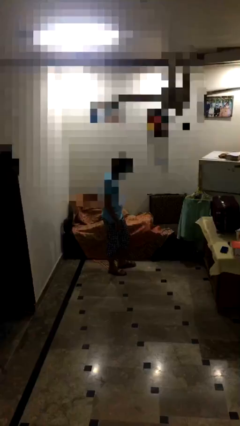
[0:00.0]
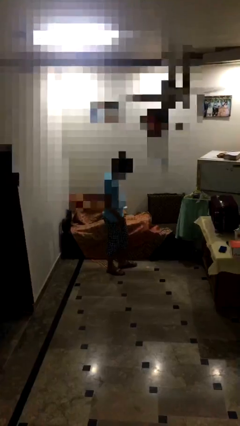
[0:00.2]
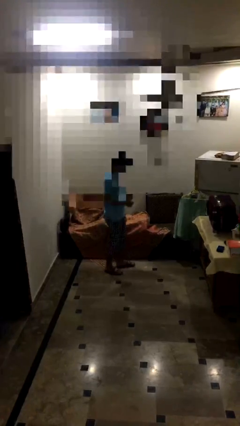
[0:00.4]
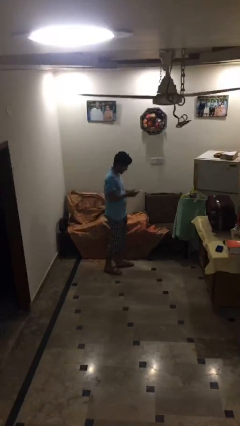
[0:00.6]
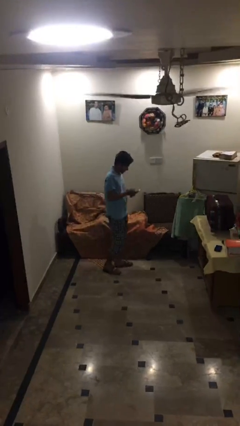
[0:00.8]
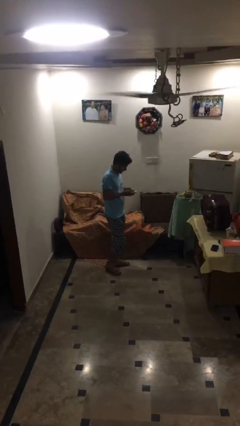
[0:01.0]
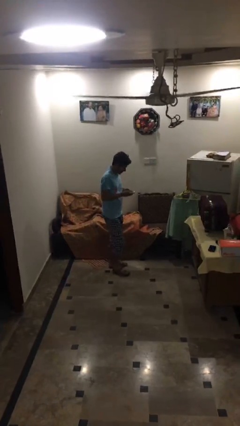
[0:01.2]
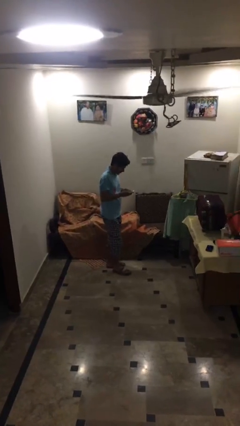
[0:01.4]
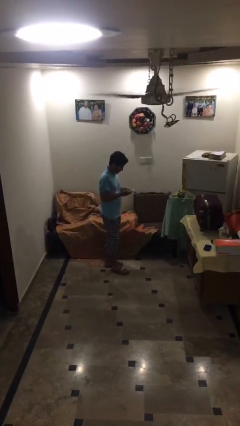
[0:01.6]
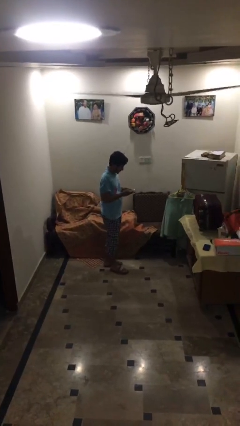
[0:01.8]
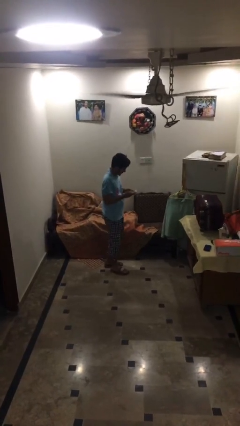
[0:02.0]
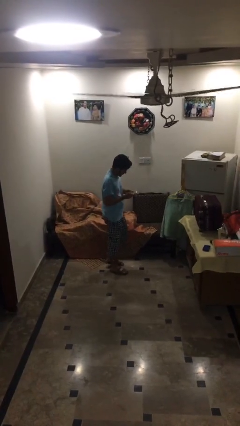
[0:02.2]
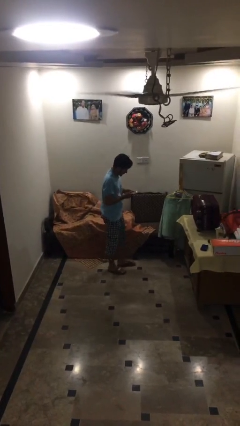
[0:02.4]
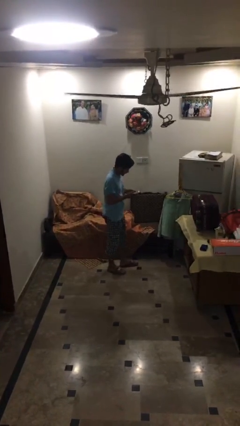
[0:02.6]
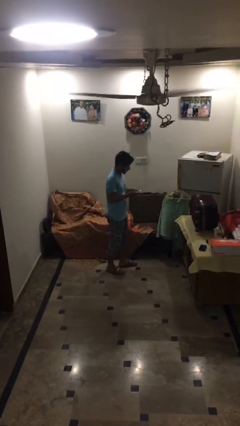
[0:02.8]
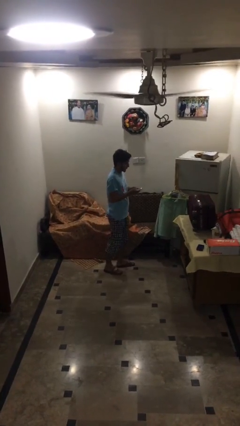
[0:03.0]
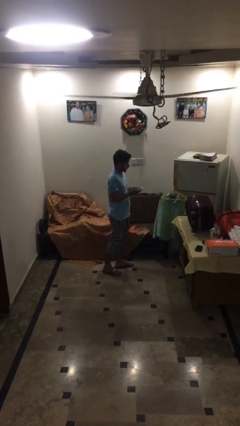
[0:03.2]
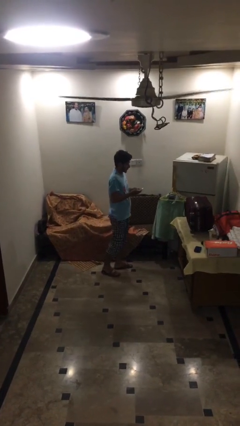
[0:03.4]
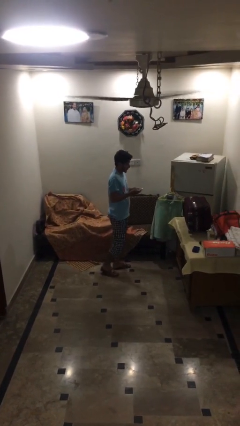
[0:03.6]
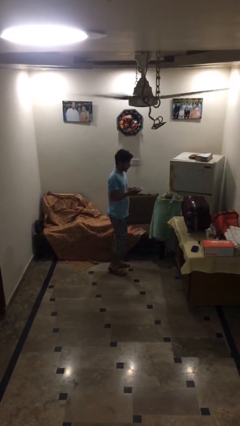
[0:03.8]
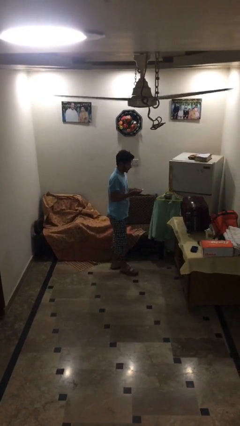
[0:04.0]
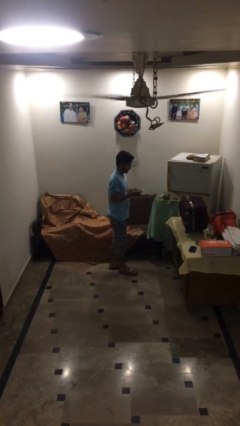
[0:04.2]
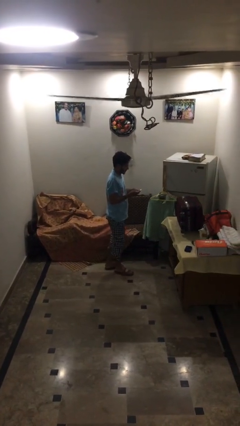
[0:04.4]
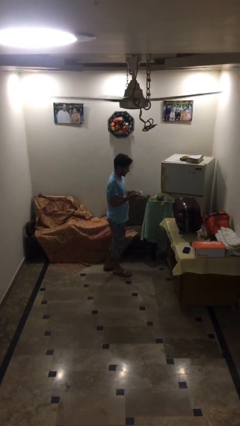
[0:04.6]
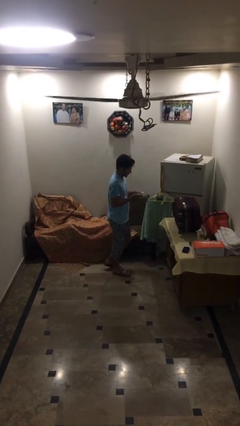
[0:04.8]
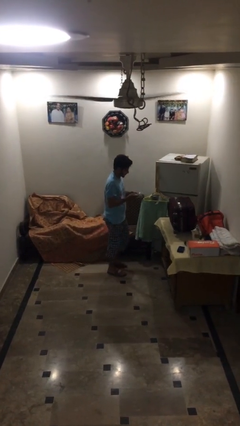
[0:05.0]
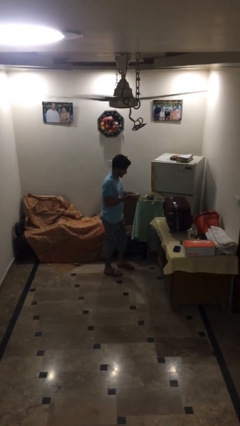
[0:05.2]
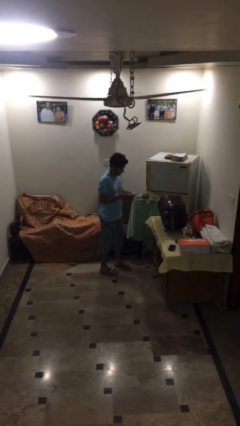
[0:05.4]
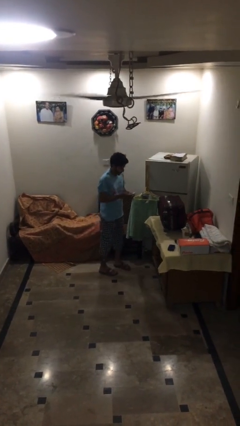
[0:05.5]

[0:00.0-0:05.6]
person texts on phone

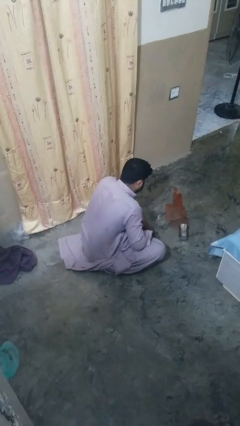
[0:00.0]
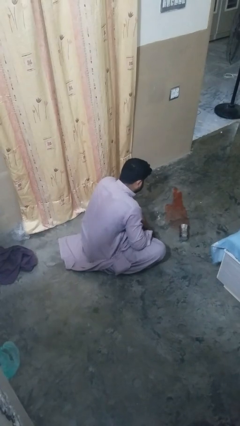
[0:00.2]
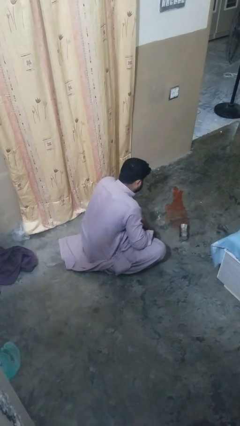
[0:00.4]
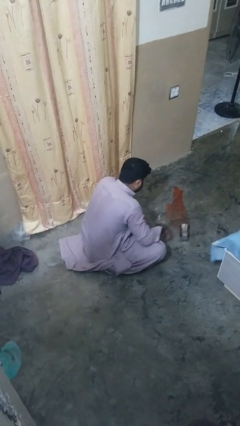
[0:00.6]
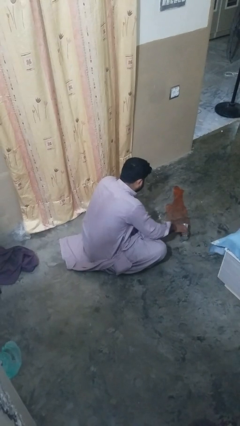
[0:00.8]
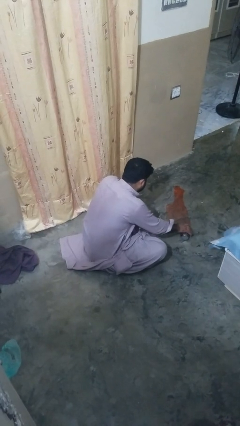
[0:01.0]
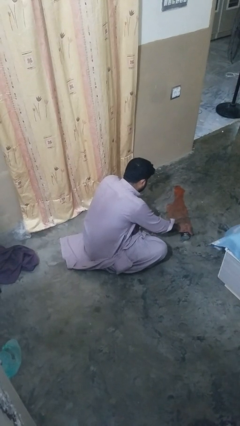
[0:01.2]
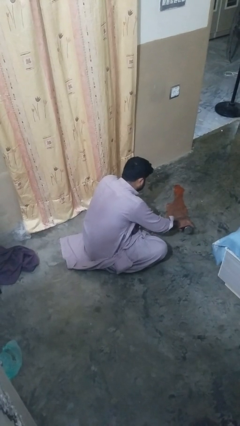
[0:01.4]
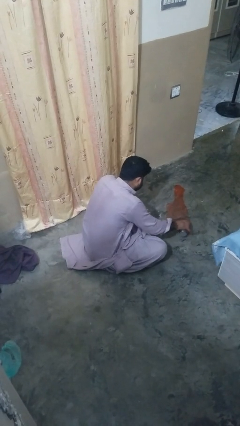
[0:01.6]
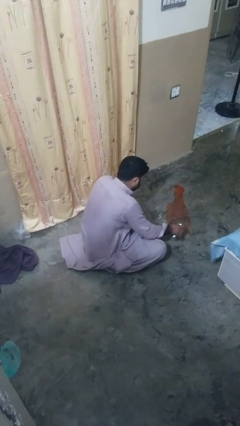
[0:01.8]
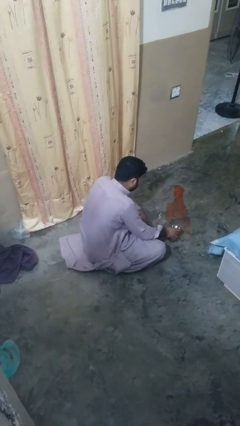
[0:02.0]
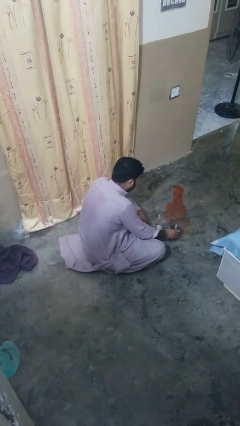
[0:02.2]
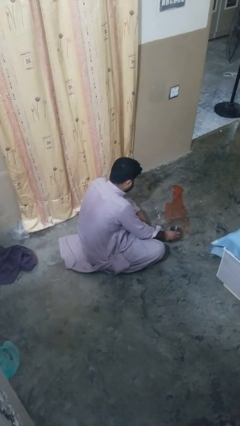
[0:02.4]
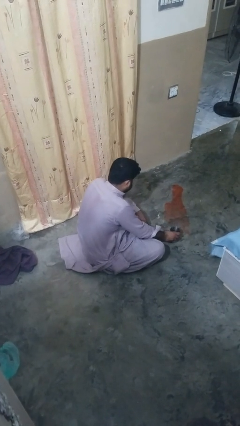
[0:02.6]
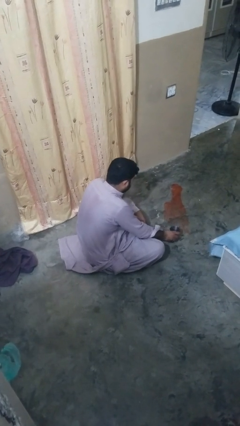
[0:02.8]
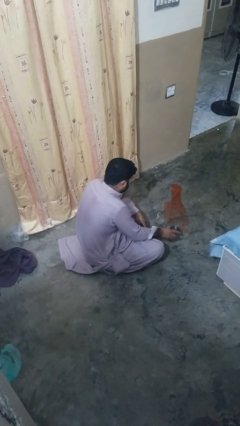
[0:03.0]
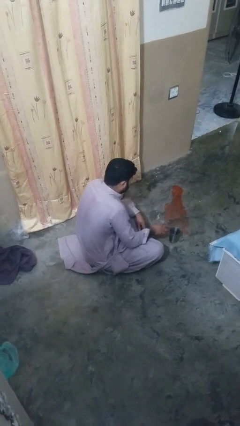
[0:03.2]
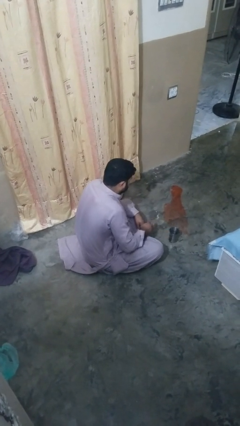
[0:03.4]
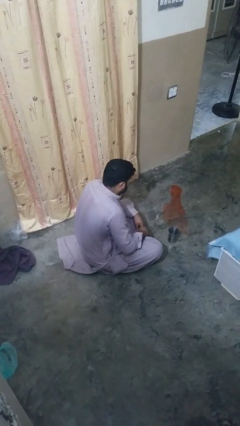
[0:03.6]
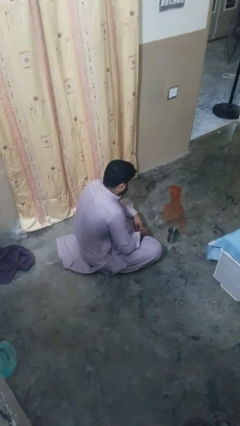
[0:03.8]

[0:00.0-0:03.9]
person sets upright glass

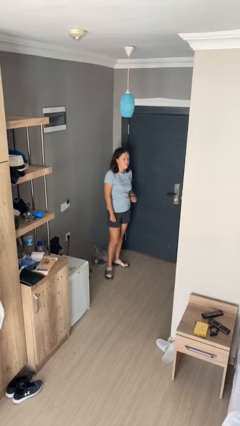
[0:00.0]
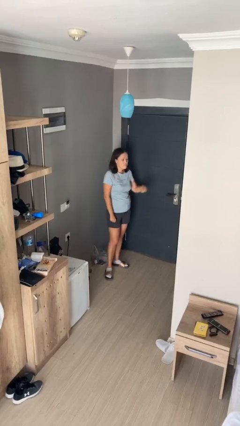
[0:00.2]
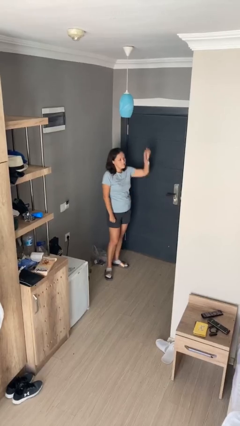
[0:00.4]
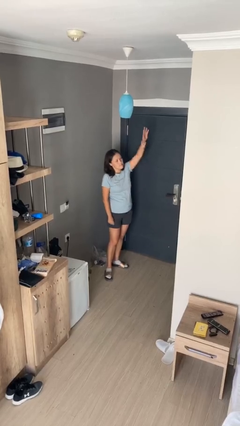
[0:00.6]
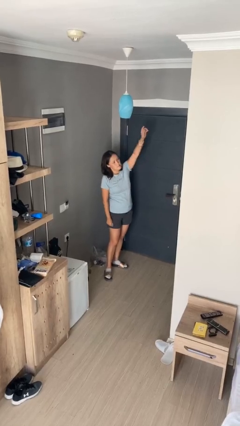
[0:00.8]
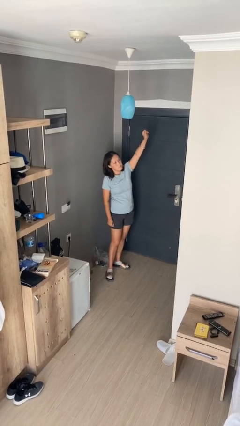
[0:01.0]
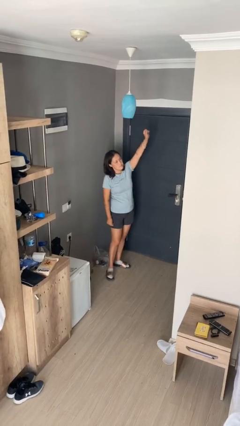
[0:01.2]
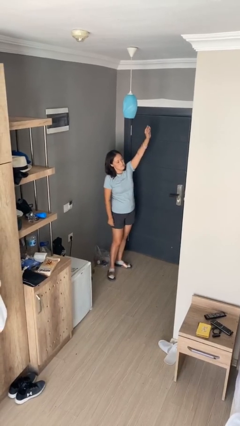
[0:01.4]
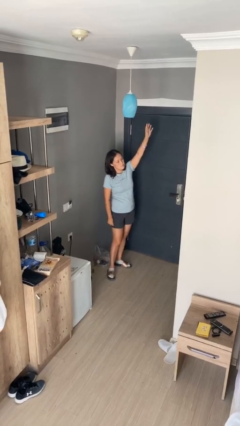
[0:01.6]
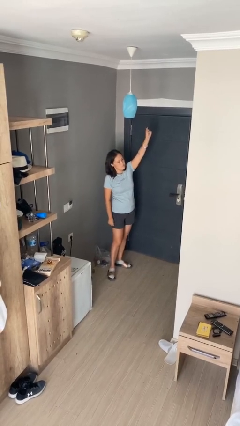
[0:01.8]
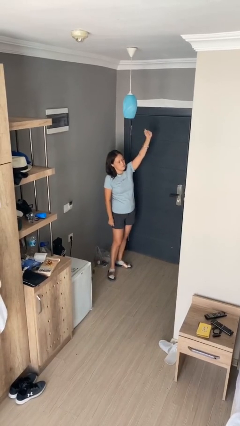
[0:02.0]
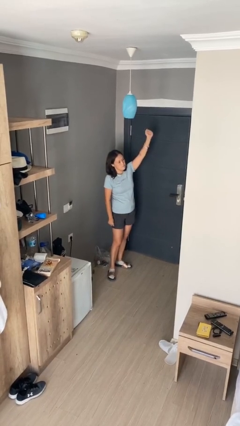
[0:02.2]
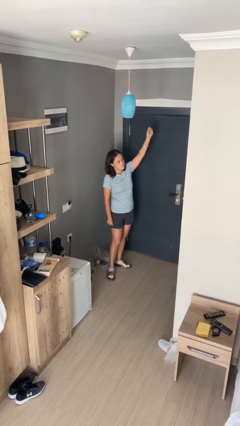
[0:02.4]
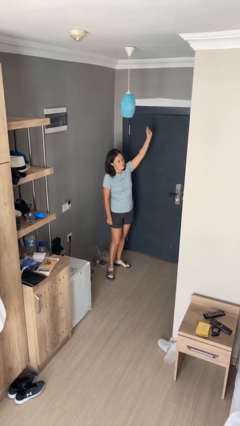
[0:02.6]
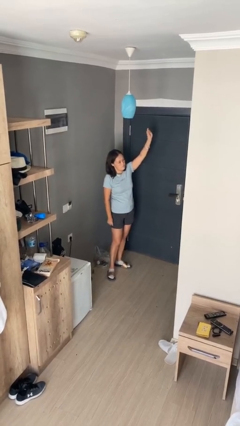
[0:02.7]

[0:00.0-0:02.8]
person gestures raise hand

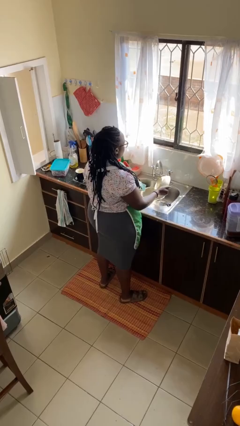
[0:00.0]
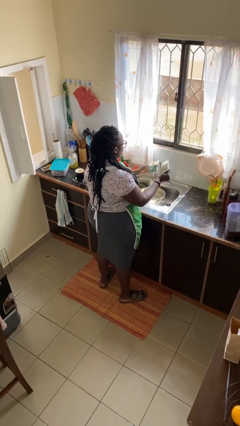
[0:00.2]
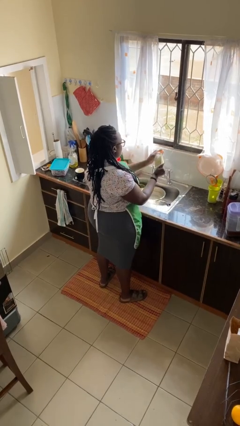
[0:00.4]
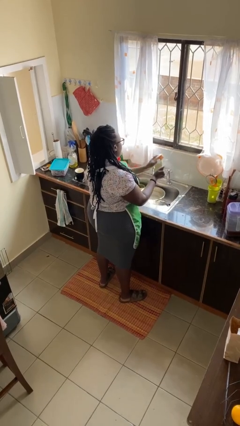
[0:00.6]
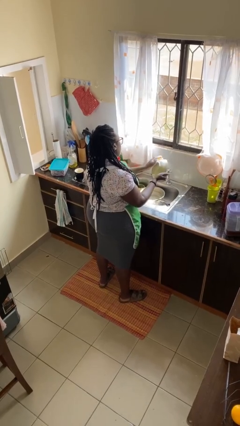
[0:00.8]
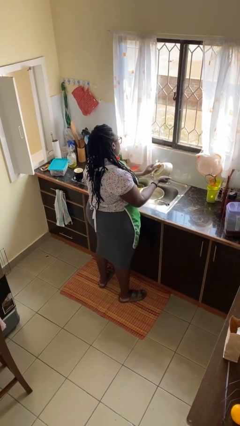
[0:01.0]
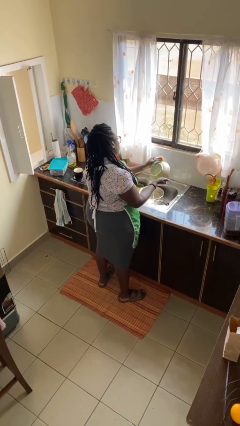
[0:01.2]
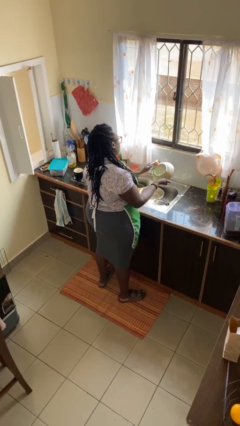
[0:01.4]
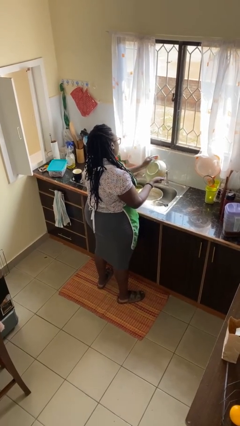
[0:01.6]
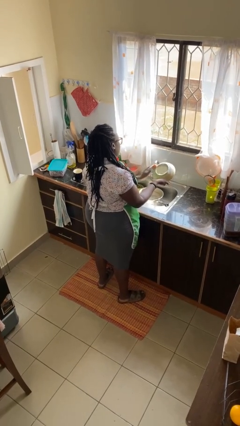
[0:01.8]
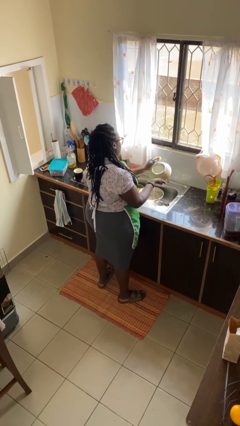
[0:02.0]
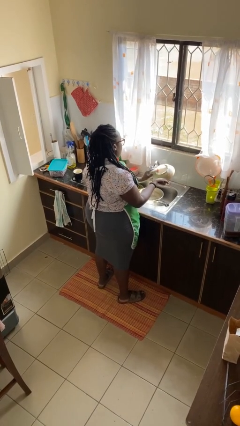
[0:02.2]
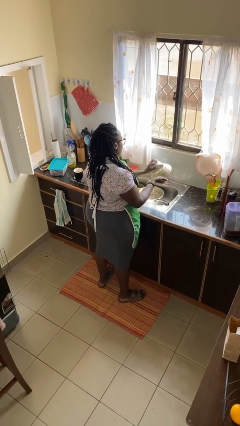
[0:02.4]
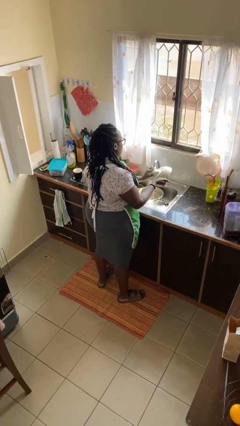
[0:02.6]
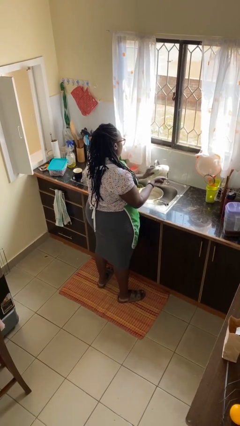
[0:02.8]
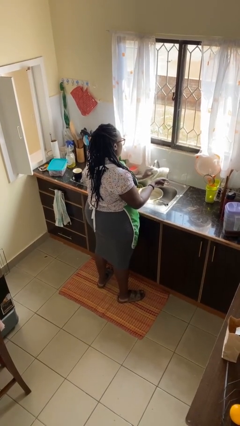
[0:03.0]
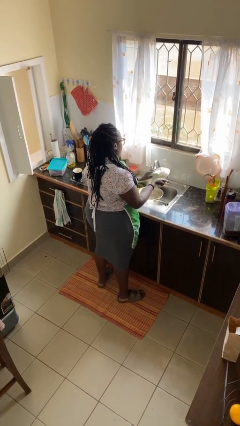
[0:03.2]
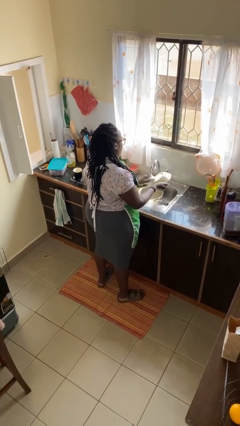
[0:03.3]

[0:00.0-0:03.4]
person washes dish

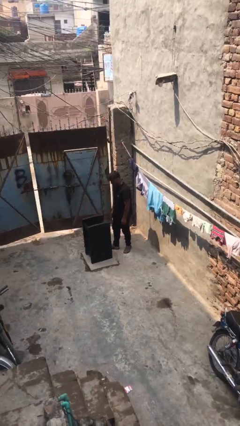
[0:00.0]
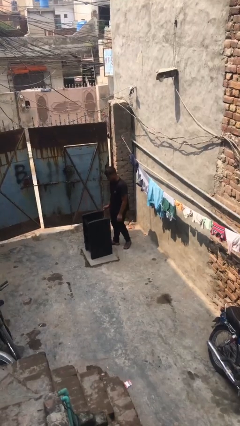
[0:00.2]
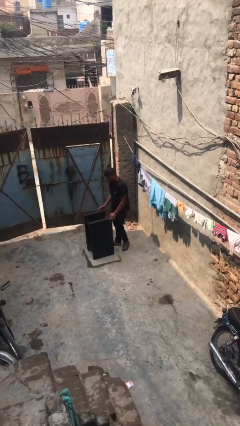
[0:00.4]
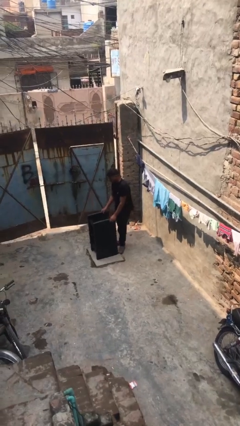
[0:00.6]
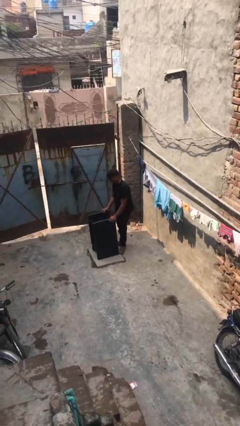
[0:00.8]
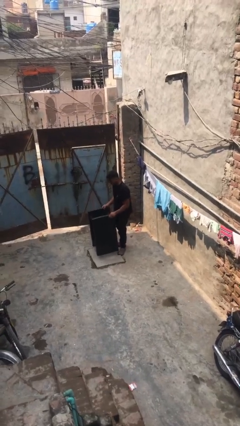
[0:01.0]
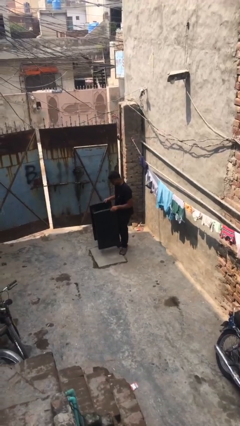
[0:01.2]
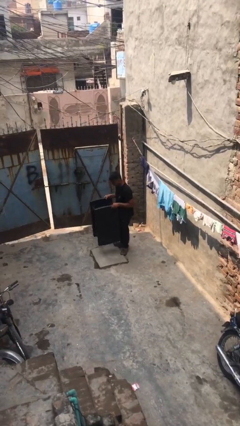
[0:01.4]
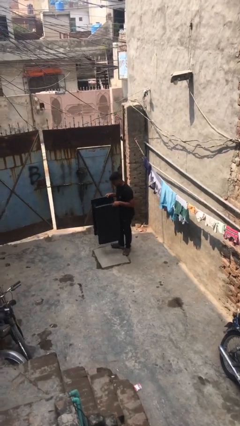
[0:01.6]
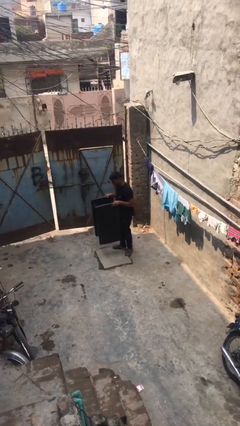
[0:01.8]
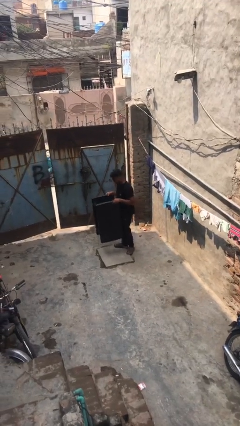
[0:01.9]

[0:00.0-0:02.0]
person picks up object from floor
